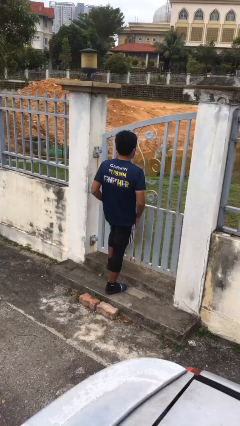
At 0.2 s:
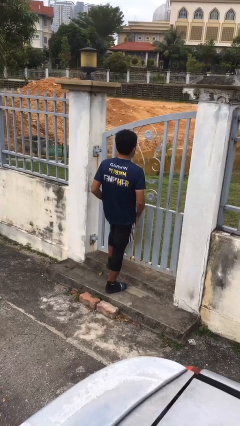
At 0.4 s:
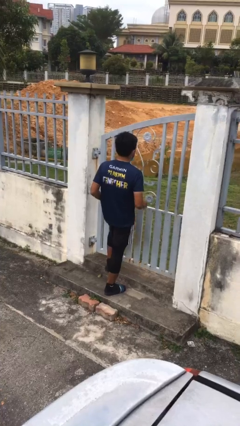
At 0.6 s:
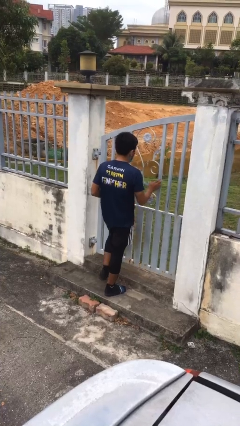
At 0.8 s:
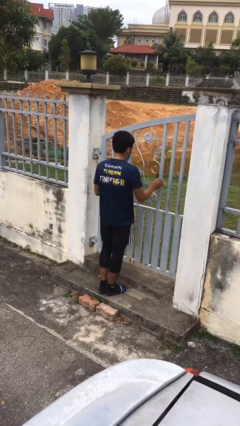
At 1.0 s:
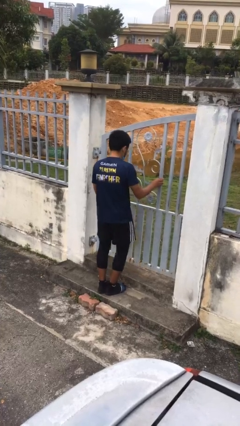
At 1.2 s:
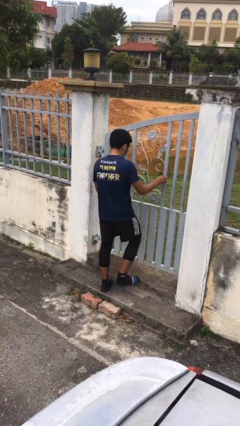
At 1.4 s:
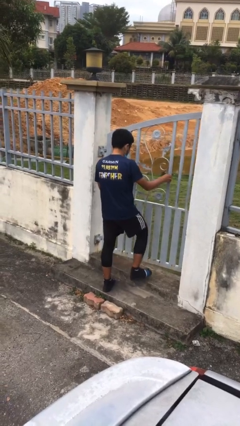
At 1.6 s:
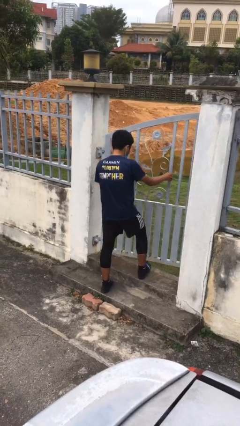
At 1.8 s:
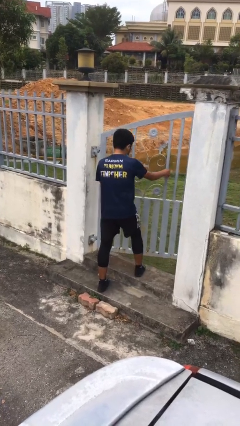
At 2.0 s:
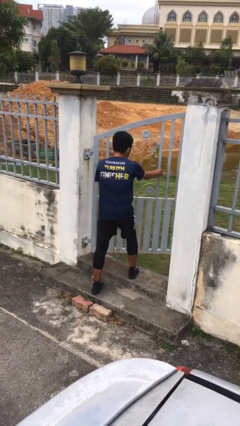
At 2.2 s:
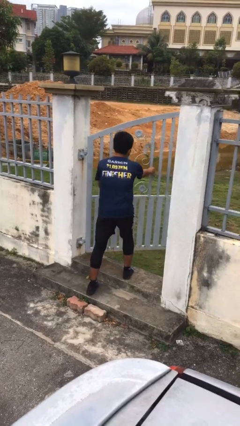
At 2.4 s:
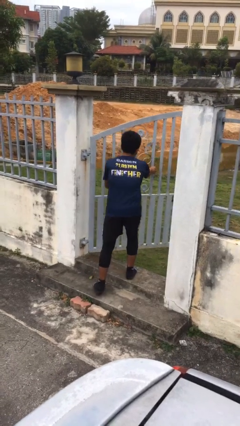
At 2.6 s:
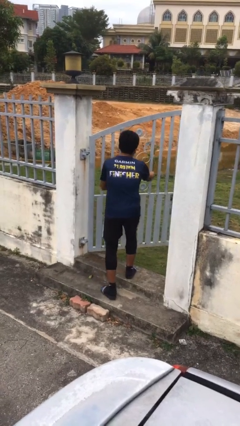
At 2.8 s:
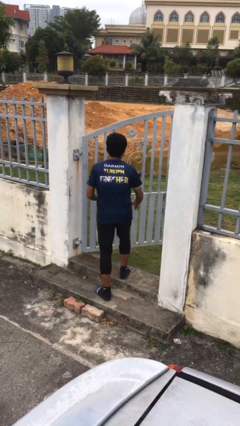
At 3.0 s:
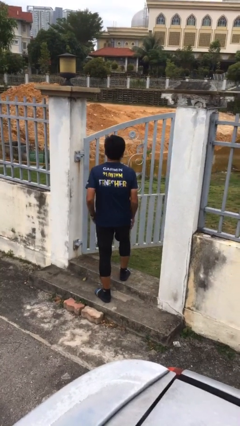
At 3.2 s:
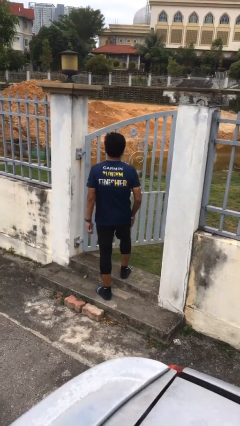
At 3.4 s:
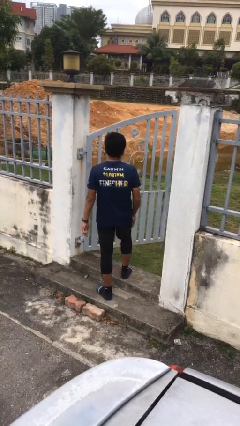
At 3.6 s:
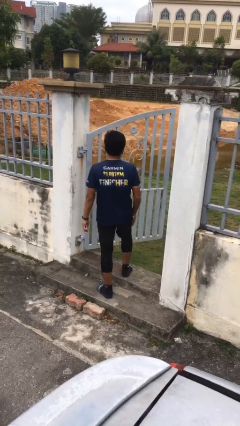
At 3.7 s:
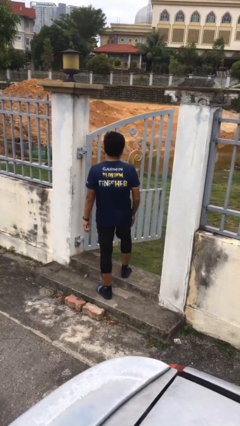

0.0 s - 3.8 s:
person opens facility door

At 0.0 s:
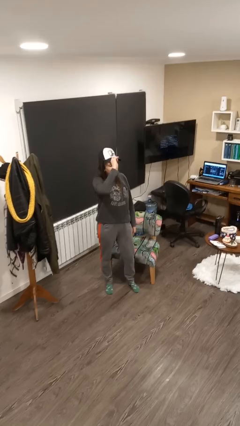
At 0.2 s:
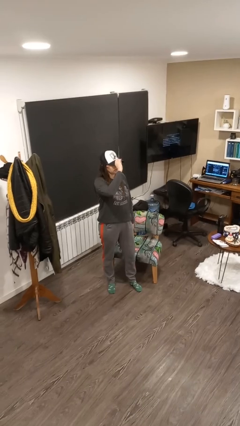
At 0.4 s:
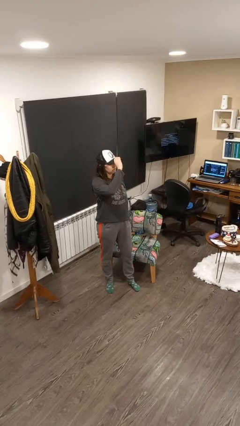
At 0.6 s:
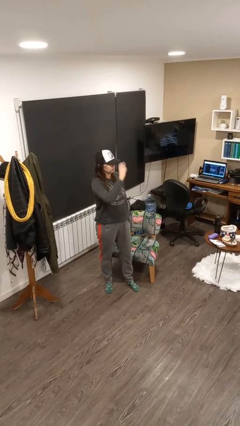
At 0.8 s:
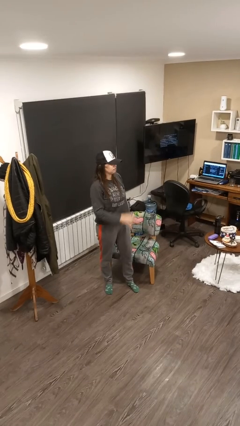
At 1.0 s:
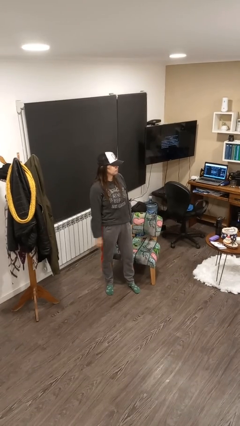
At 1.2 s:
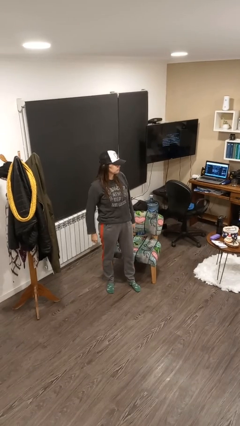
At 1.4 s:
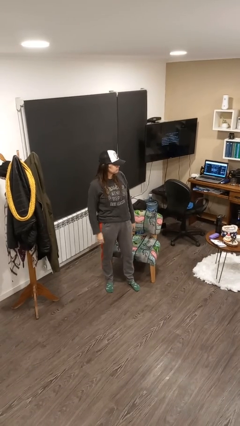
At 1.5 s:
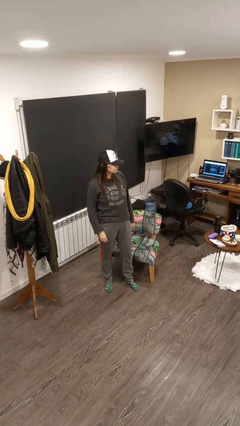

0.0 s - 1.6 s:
person puts on hat

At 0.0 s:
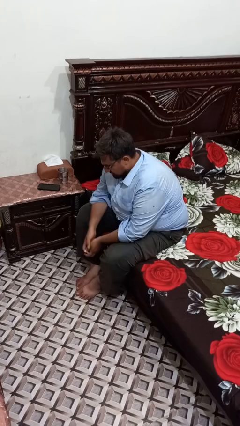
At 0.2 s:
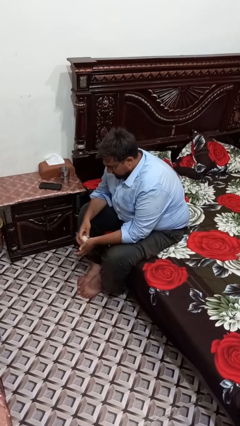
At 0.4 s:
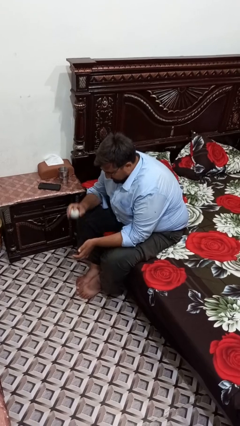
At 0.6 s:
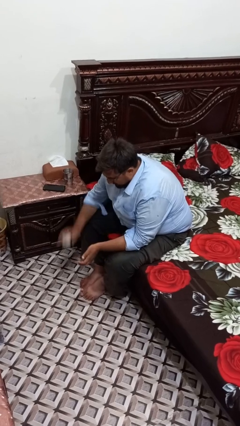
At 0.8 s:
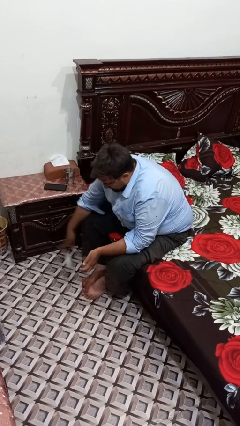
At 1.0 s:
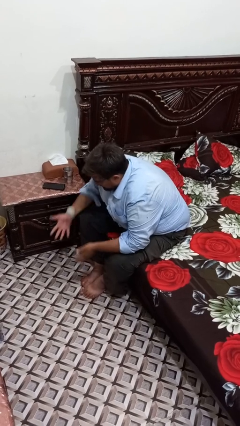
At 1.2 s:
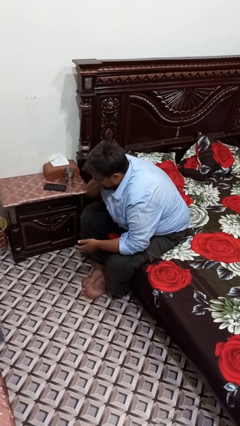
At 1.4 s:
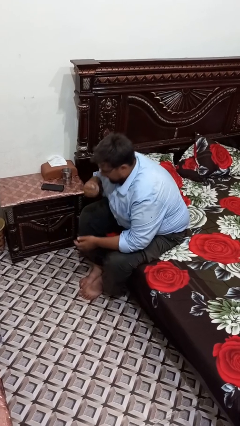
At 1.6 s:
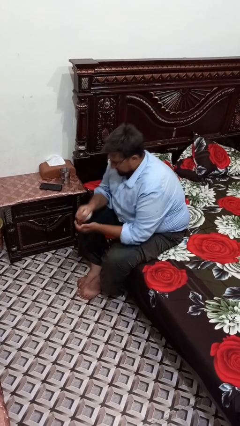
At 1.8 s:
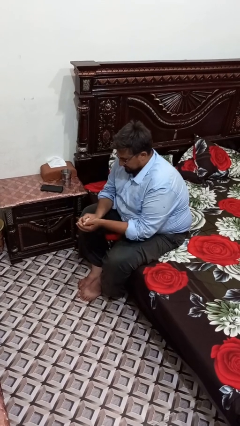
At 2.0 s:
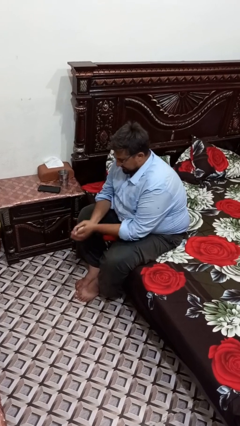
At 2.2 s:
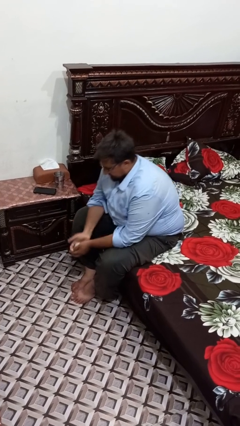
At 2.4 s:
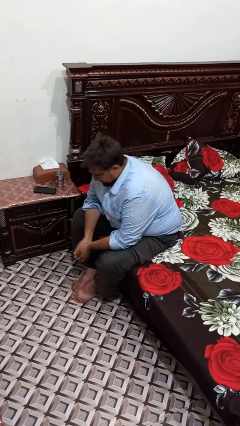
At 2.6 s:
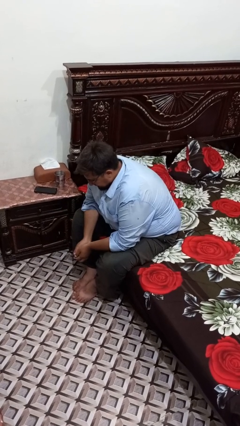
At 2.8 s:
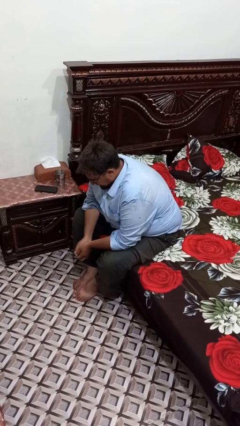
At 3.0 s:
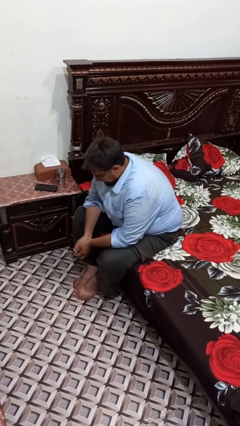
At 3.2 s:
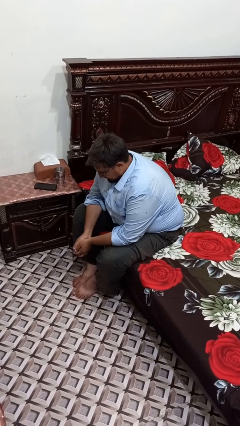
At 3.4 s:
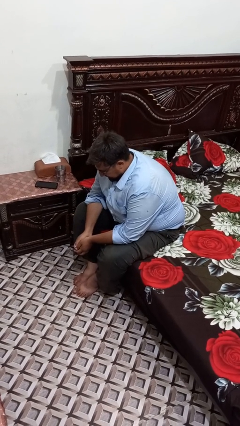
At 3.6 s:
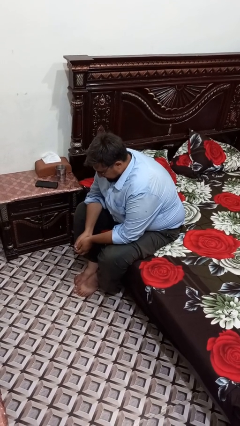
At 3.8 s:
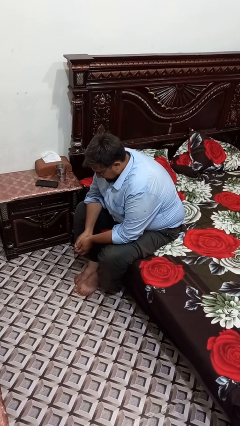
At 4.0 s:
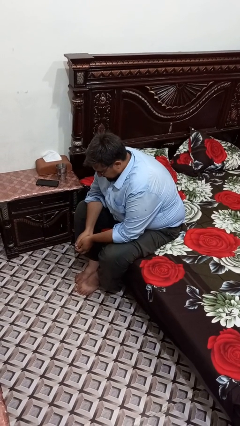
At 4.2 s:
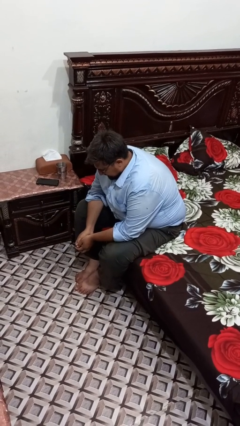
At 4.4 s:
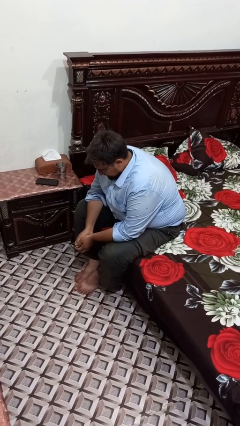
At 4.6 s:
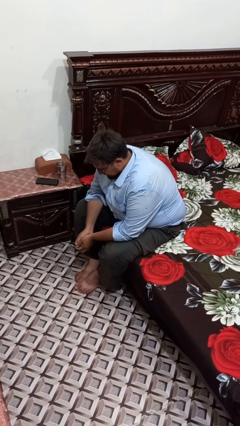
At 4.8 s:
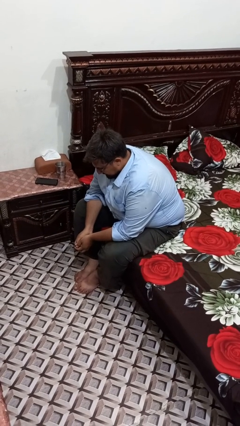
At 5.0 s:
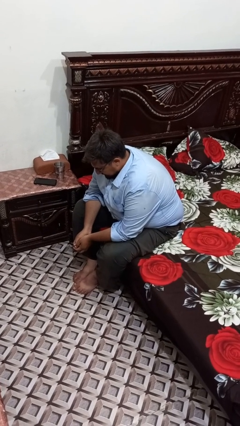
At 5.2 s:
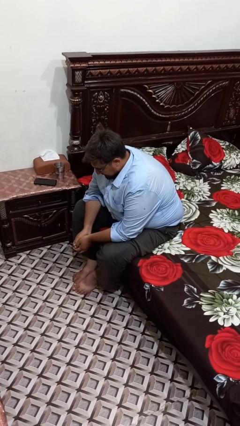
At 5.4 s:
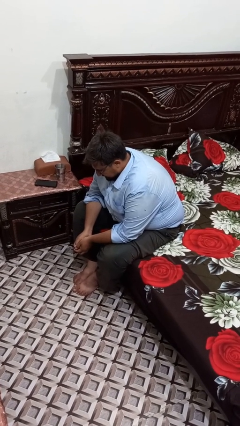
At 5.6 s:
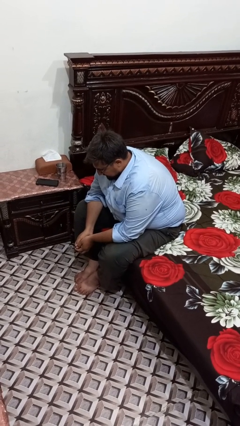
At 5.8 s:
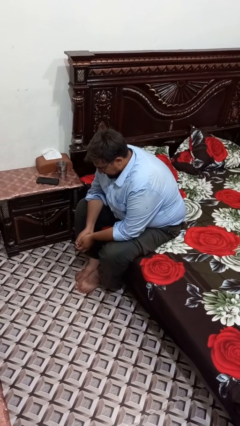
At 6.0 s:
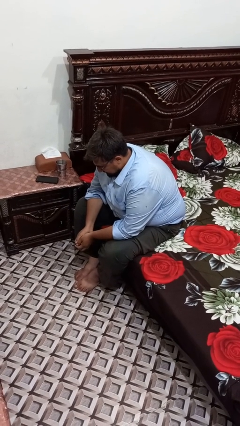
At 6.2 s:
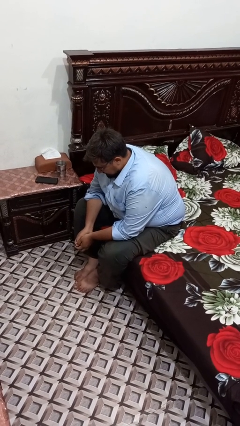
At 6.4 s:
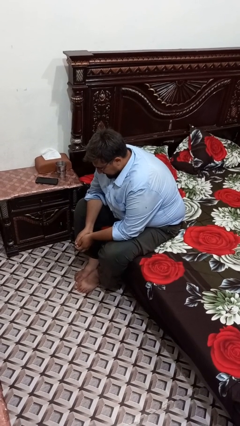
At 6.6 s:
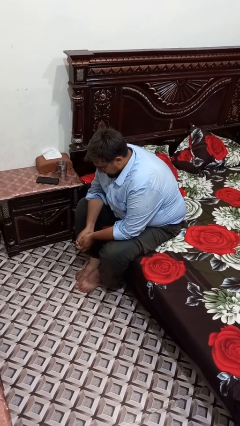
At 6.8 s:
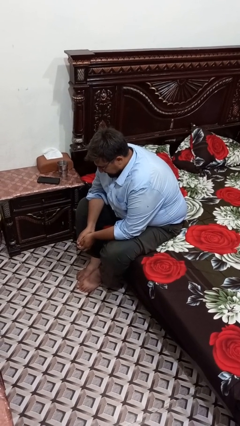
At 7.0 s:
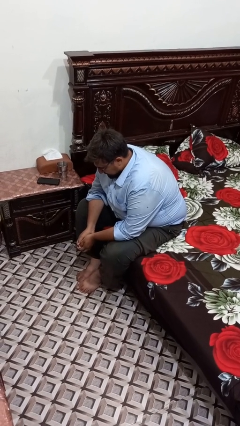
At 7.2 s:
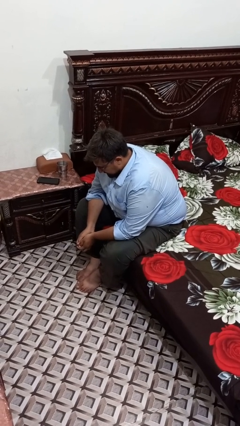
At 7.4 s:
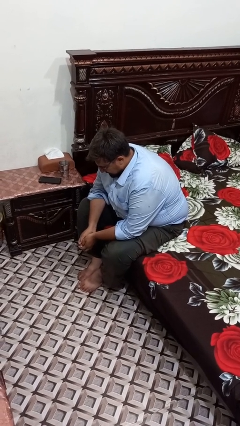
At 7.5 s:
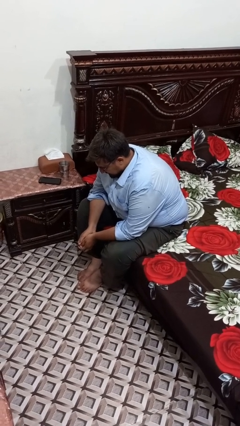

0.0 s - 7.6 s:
person bounces ball on floor

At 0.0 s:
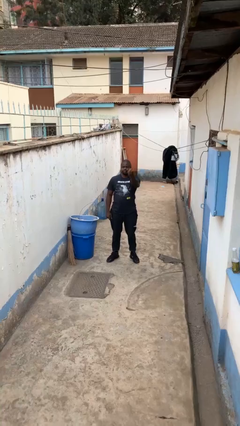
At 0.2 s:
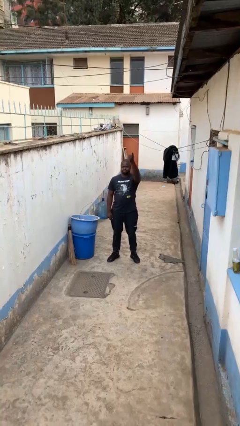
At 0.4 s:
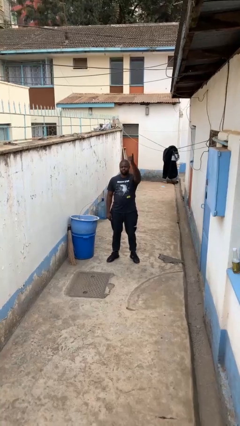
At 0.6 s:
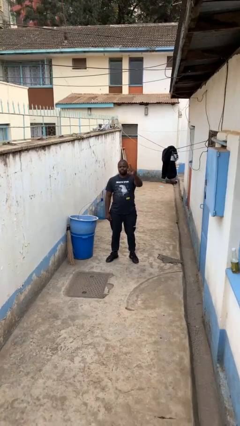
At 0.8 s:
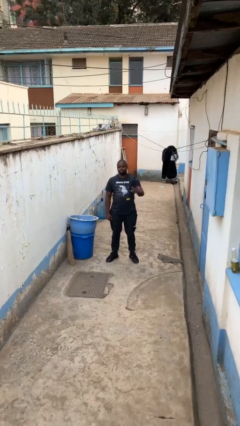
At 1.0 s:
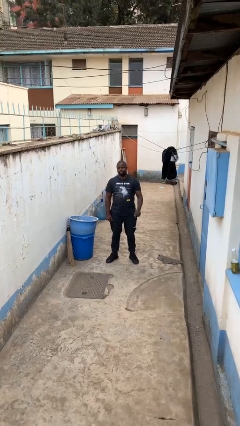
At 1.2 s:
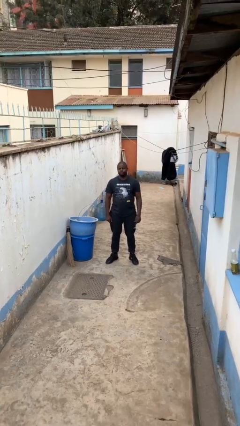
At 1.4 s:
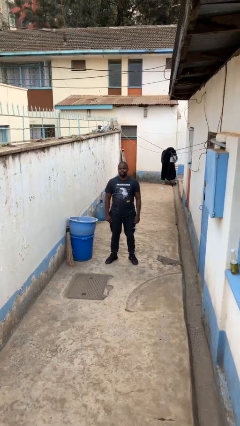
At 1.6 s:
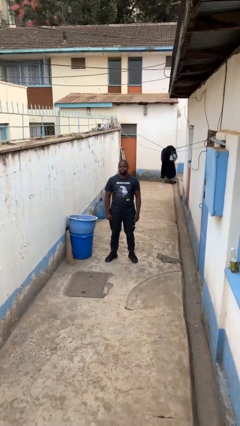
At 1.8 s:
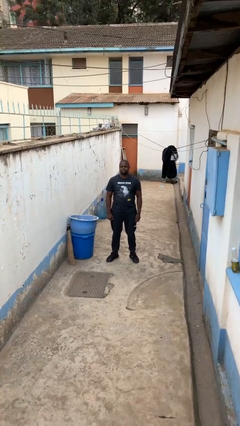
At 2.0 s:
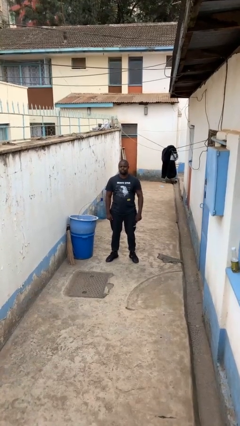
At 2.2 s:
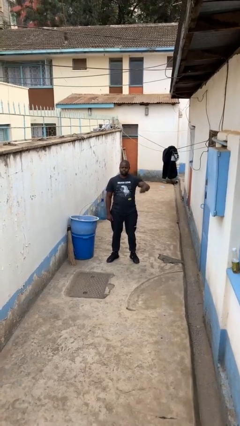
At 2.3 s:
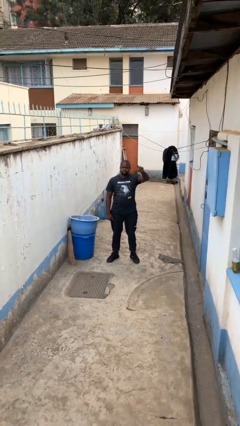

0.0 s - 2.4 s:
person gestures swipe up

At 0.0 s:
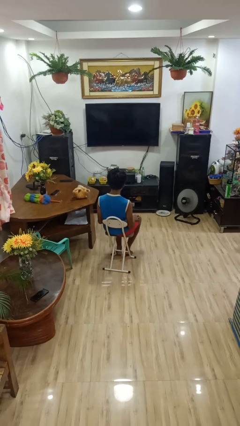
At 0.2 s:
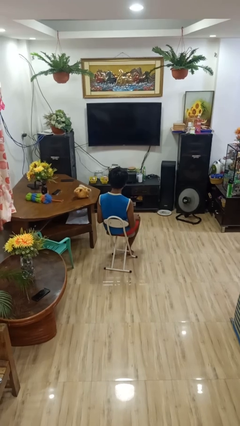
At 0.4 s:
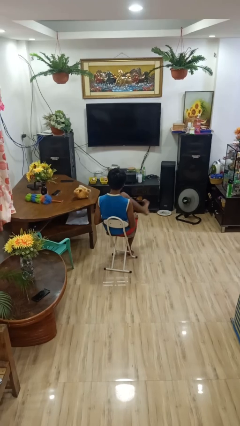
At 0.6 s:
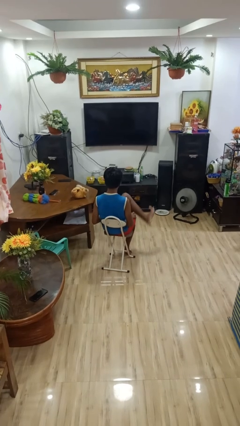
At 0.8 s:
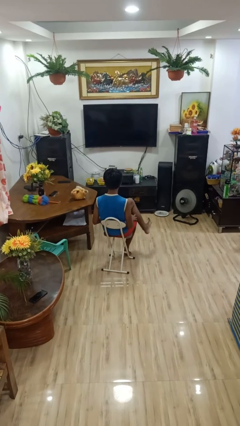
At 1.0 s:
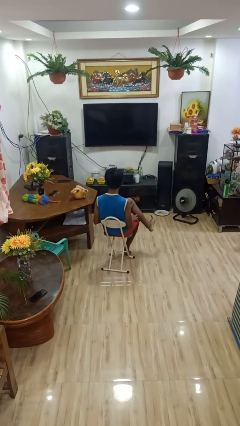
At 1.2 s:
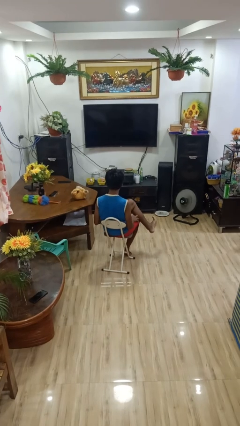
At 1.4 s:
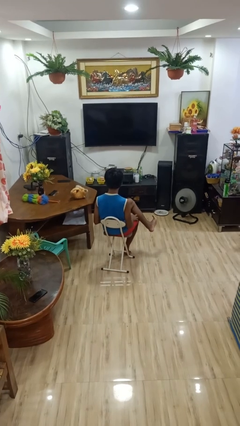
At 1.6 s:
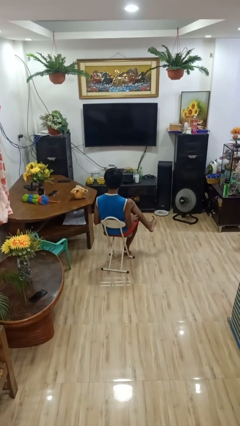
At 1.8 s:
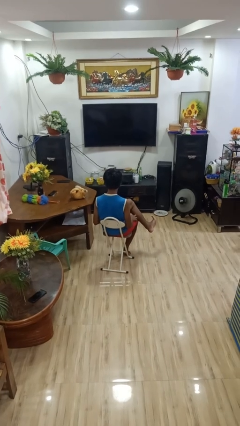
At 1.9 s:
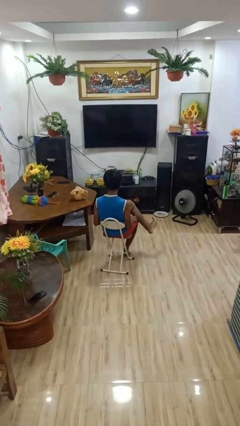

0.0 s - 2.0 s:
person crosses legs
